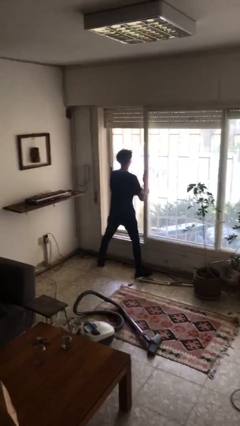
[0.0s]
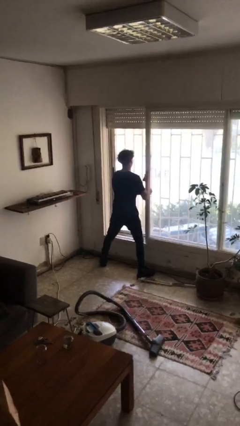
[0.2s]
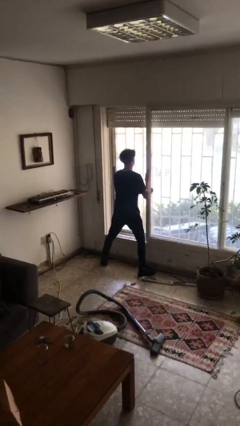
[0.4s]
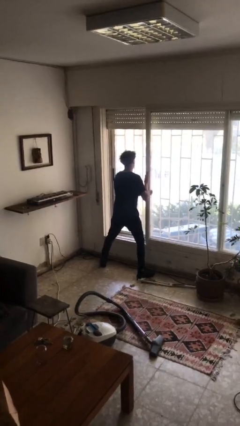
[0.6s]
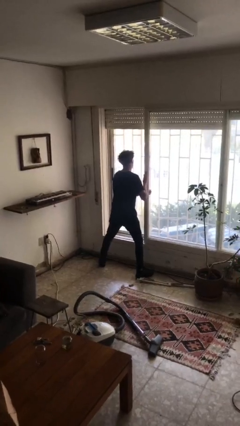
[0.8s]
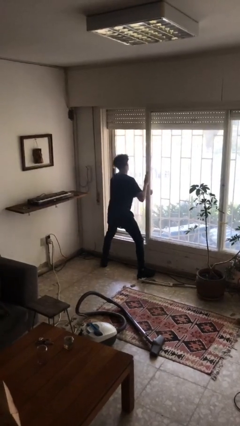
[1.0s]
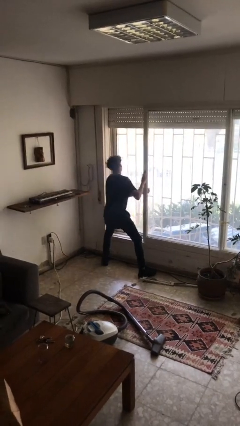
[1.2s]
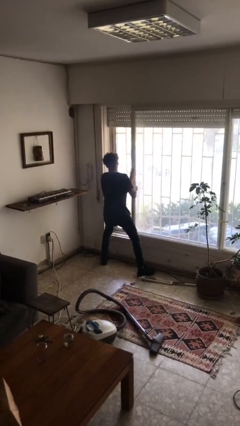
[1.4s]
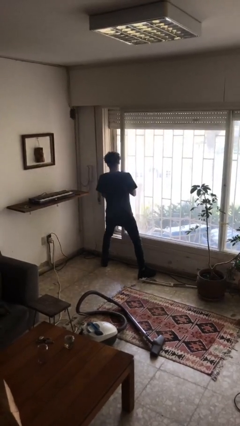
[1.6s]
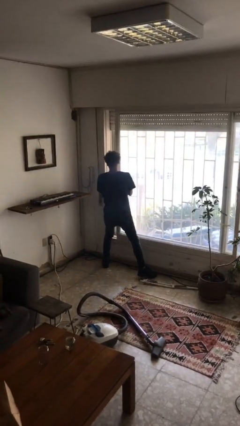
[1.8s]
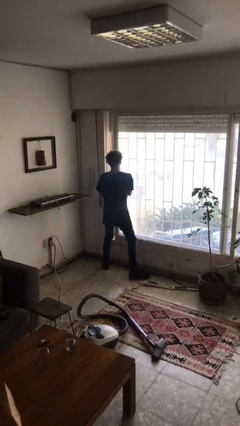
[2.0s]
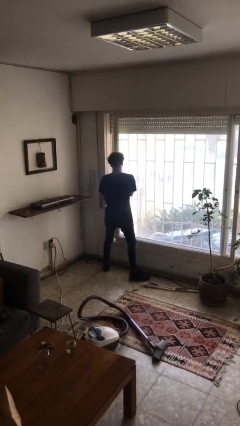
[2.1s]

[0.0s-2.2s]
person closes sliding door

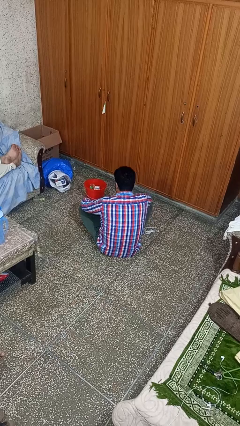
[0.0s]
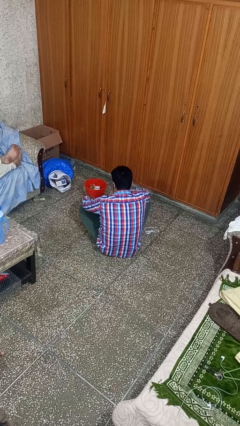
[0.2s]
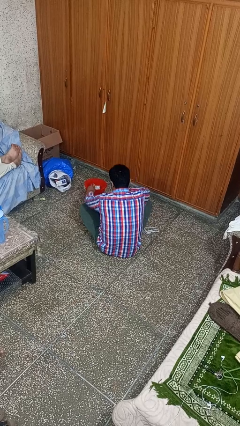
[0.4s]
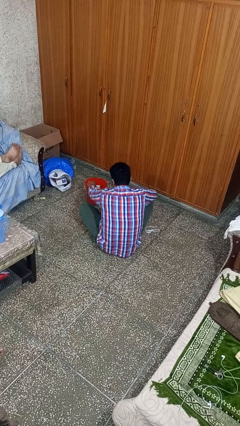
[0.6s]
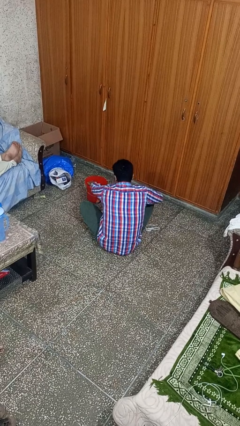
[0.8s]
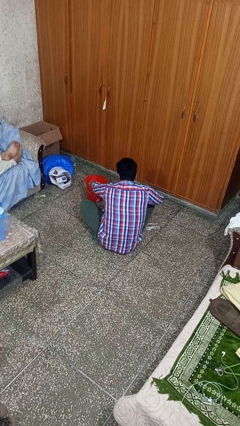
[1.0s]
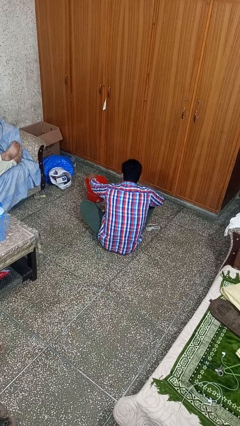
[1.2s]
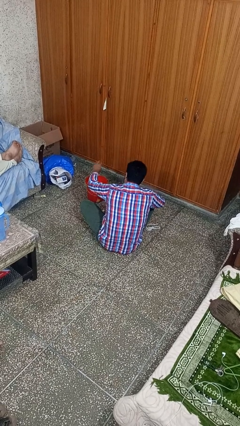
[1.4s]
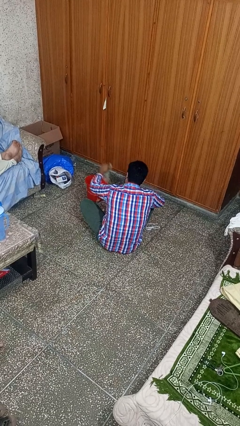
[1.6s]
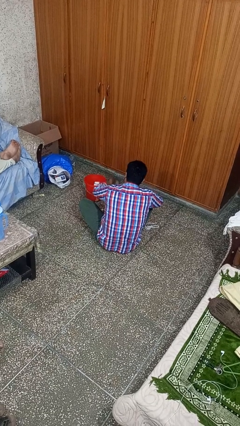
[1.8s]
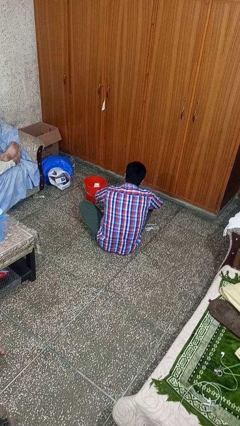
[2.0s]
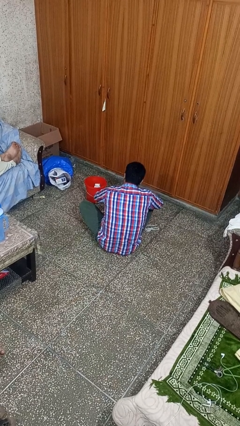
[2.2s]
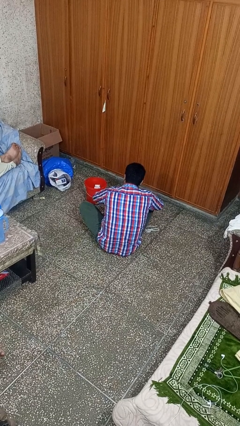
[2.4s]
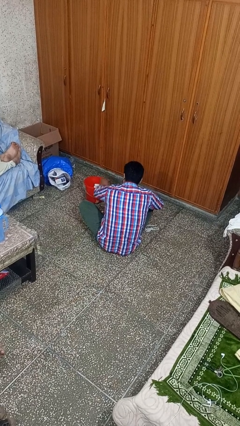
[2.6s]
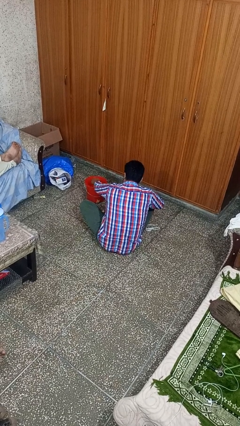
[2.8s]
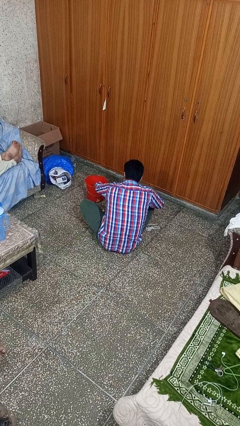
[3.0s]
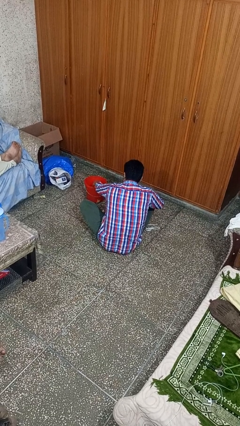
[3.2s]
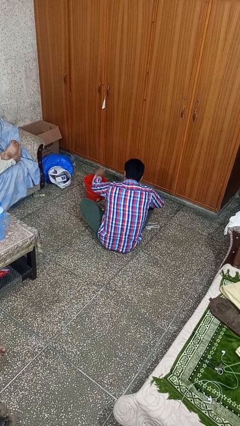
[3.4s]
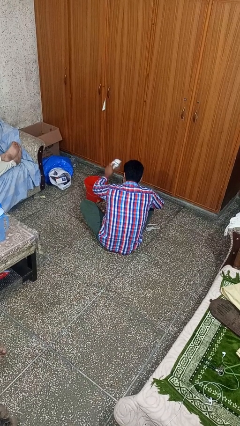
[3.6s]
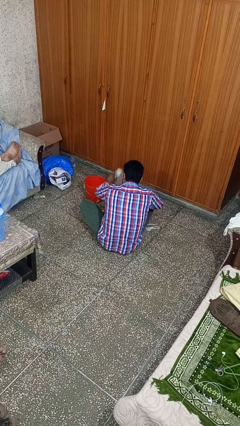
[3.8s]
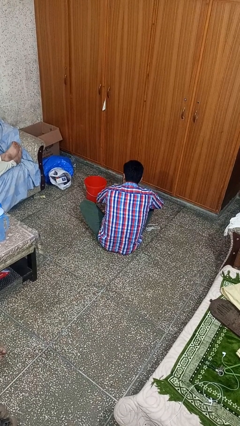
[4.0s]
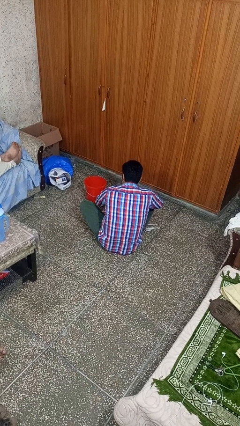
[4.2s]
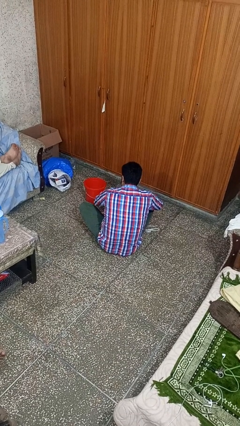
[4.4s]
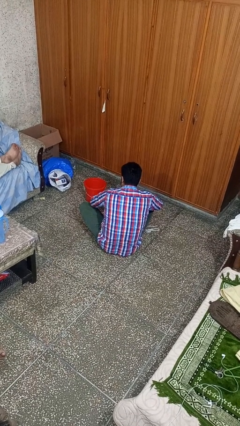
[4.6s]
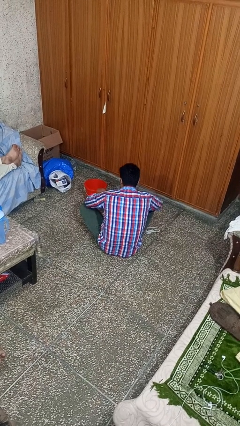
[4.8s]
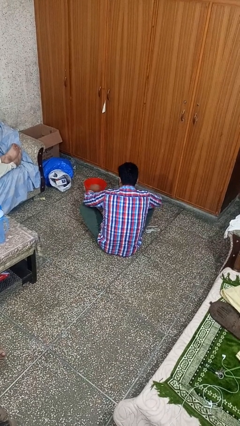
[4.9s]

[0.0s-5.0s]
person takes object from basket

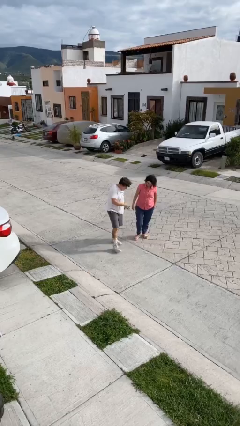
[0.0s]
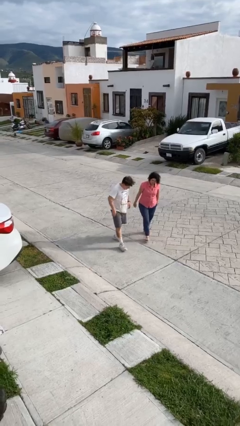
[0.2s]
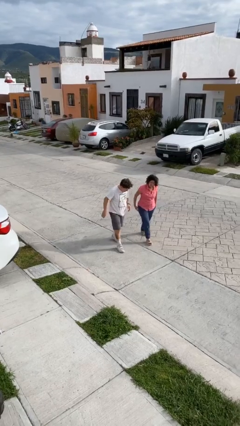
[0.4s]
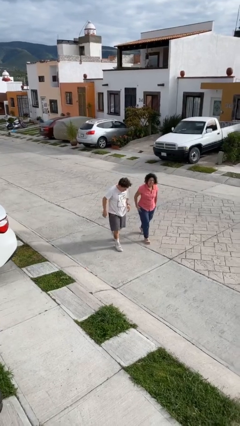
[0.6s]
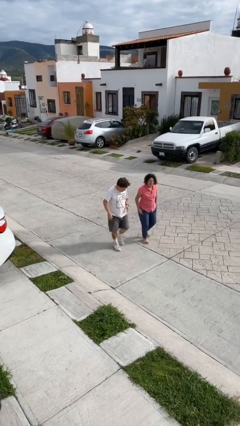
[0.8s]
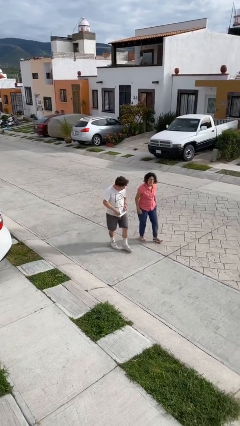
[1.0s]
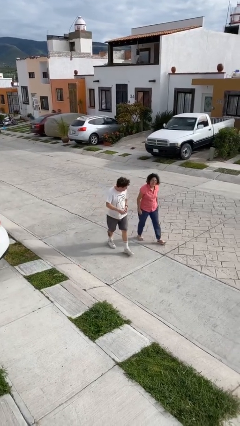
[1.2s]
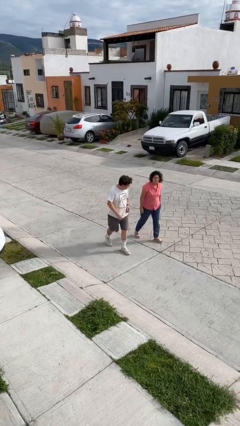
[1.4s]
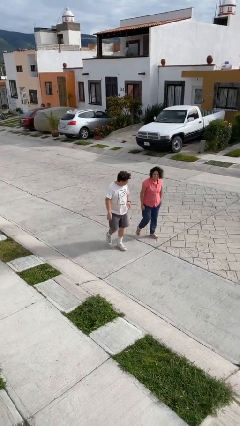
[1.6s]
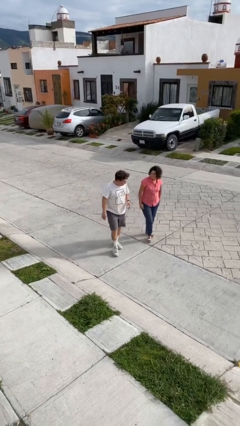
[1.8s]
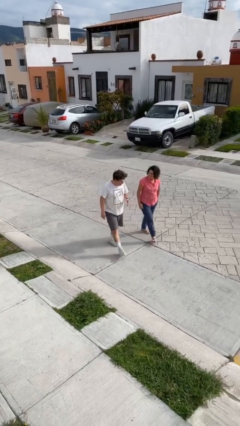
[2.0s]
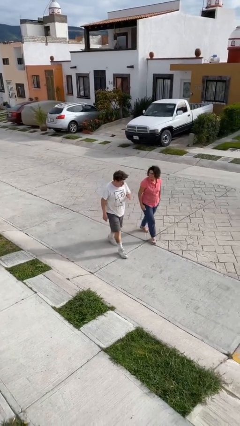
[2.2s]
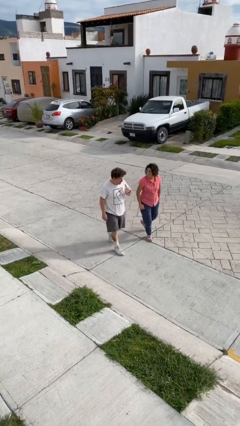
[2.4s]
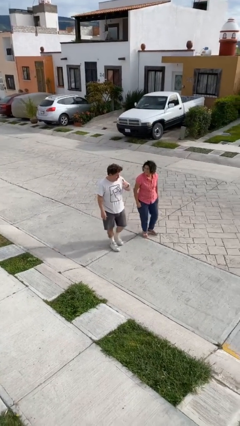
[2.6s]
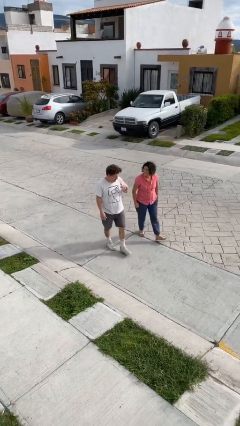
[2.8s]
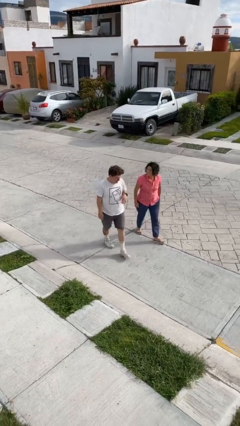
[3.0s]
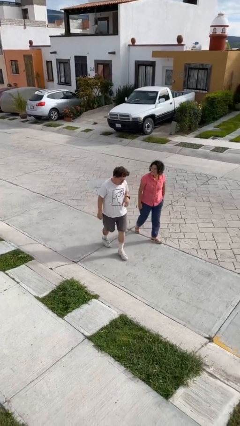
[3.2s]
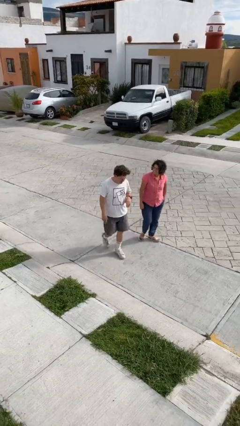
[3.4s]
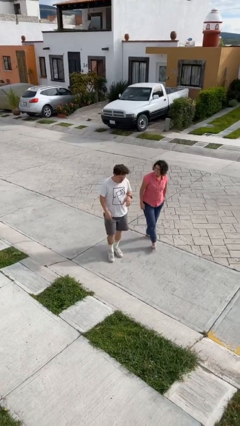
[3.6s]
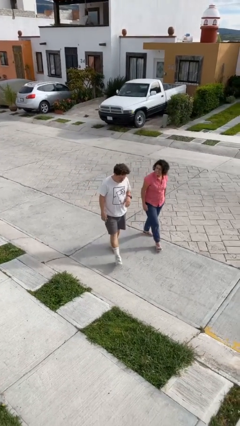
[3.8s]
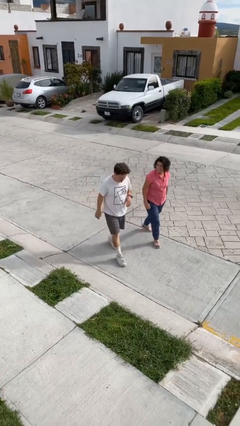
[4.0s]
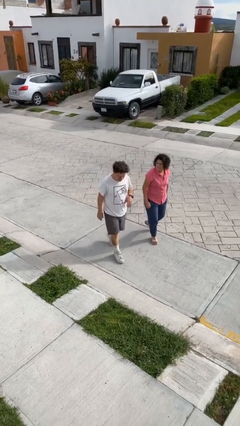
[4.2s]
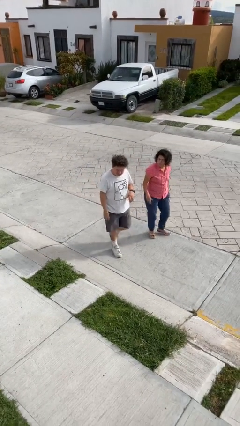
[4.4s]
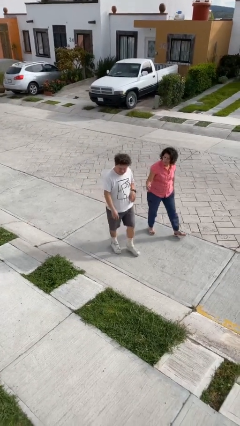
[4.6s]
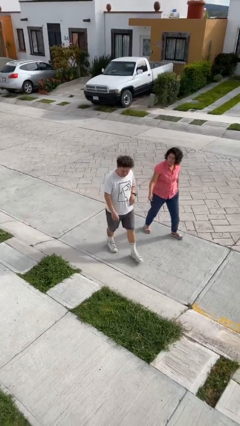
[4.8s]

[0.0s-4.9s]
person talks to person

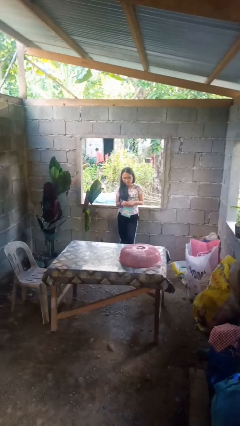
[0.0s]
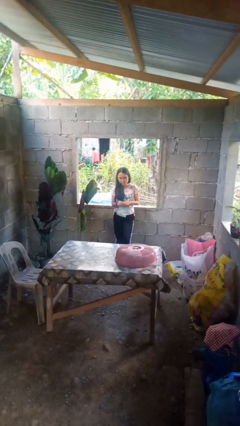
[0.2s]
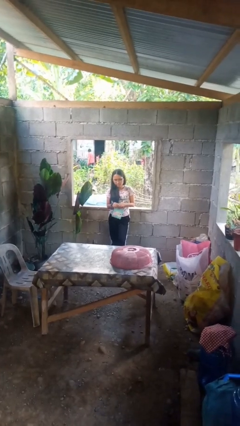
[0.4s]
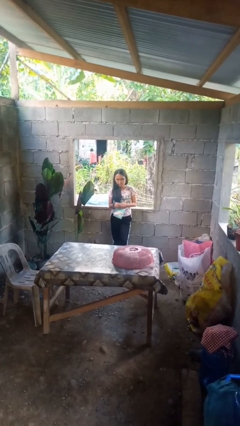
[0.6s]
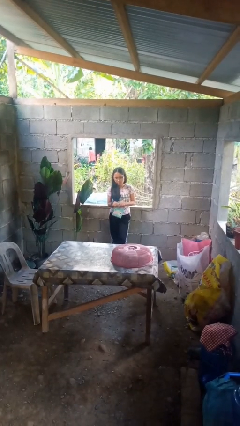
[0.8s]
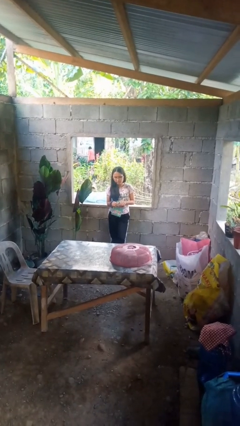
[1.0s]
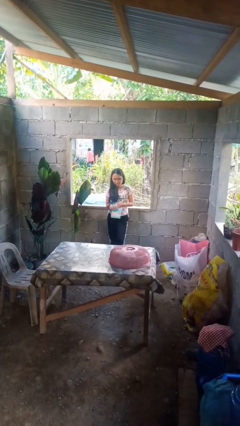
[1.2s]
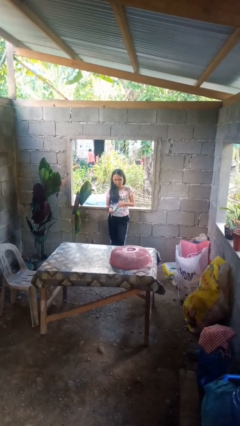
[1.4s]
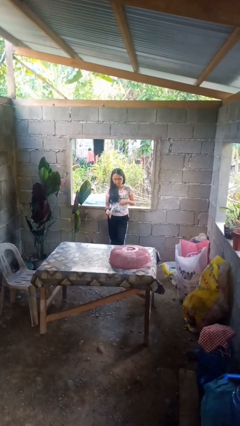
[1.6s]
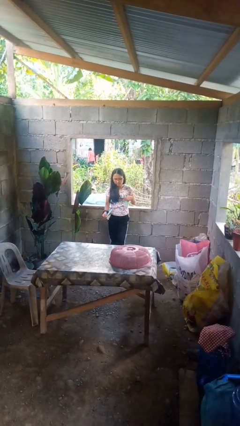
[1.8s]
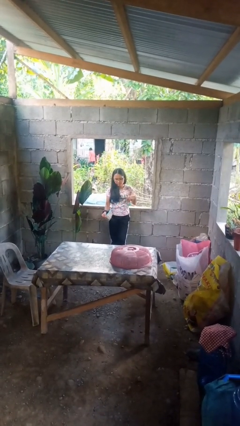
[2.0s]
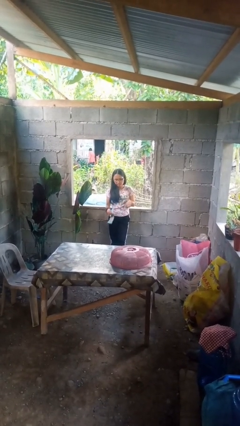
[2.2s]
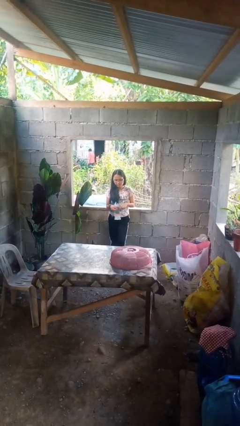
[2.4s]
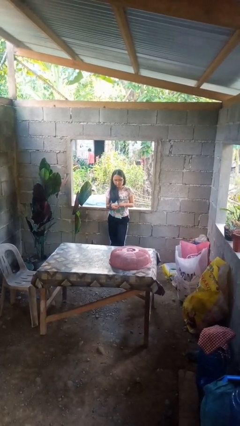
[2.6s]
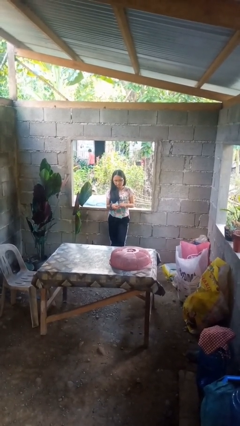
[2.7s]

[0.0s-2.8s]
person tears paper

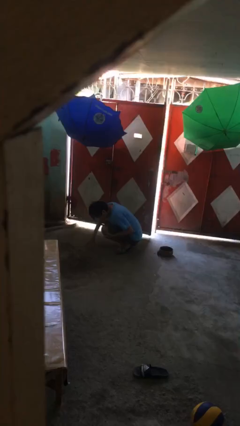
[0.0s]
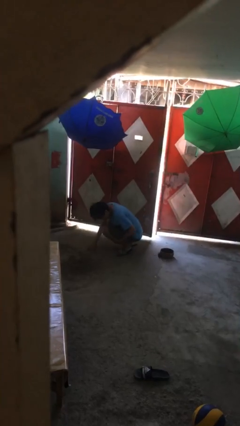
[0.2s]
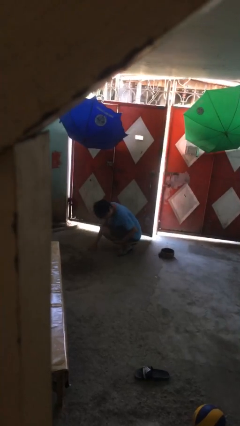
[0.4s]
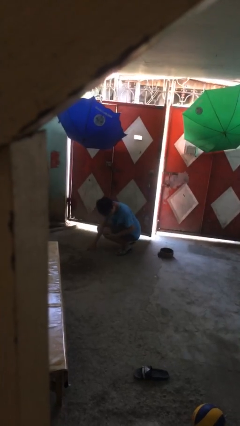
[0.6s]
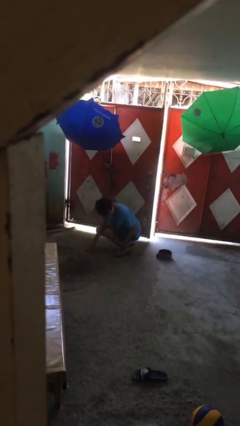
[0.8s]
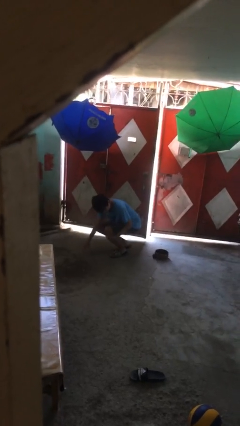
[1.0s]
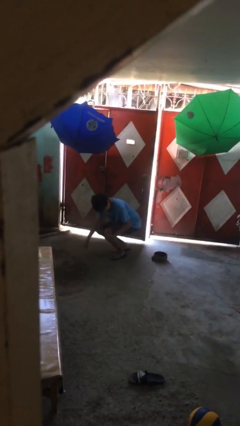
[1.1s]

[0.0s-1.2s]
person lies down on floor

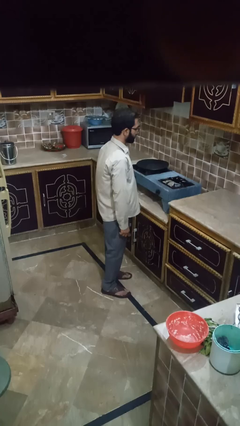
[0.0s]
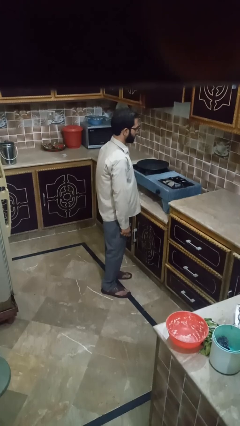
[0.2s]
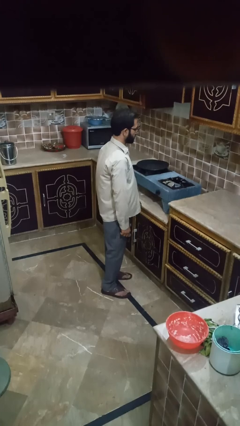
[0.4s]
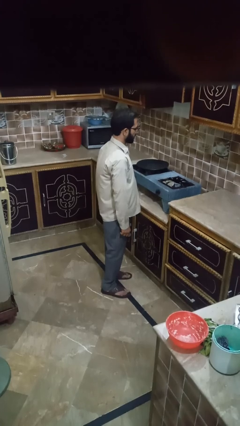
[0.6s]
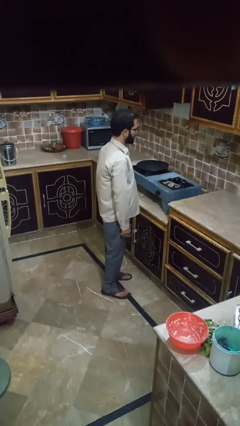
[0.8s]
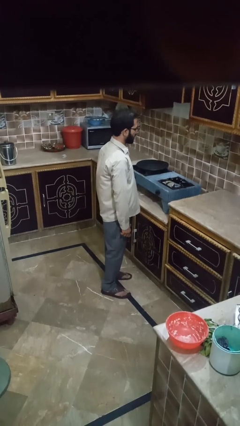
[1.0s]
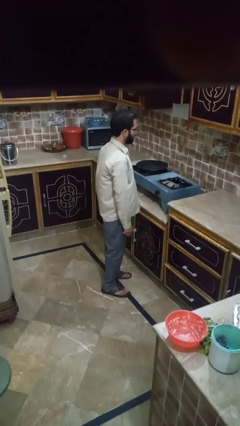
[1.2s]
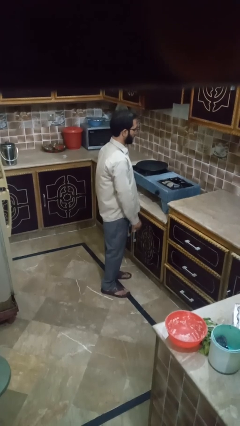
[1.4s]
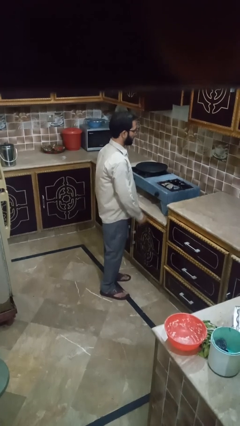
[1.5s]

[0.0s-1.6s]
person turns on stovetop
